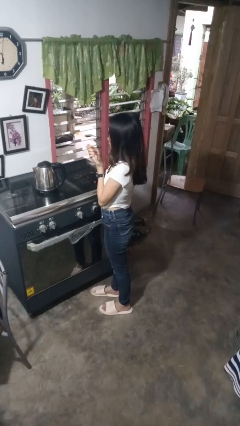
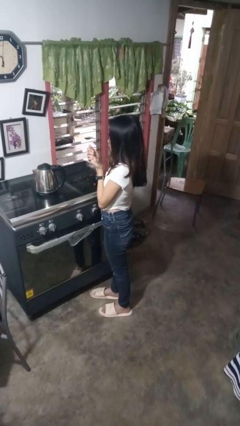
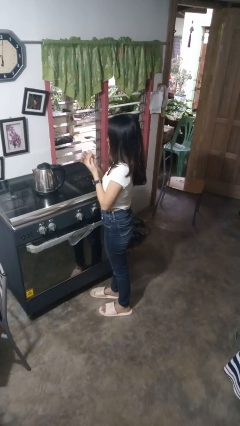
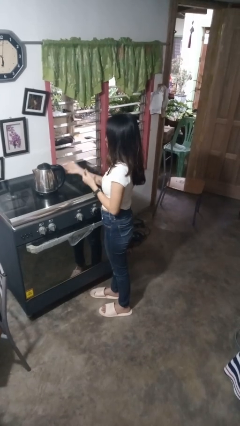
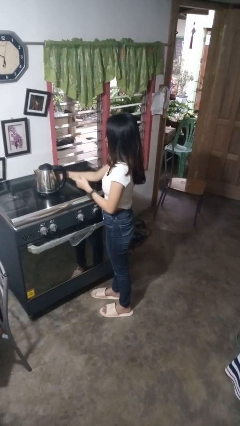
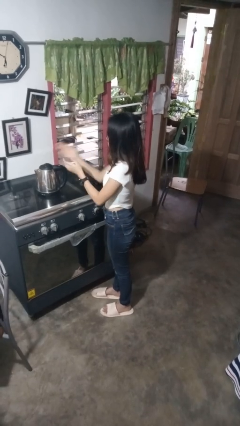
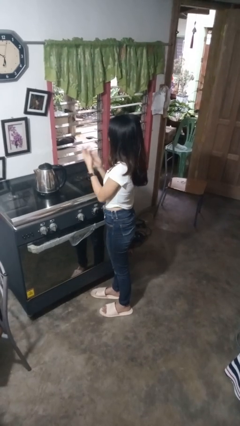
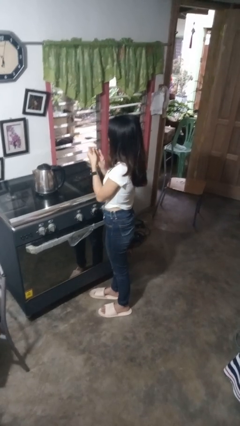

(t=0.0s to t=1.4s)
person burns hand

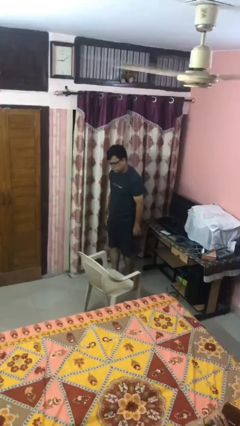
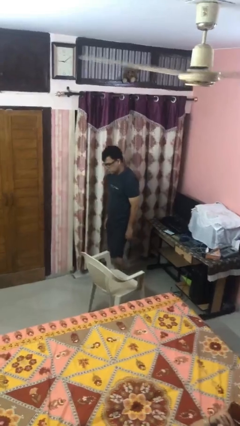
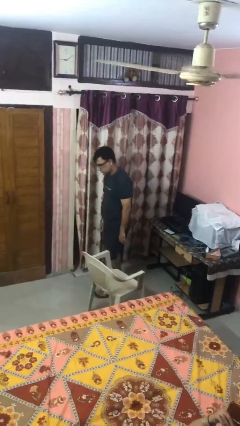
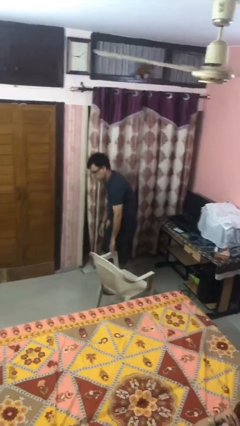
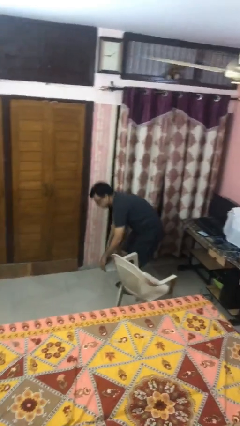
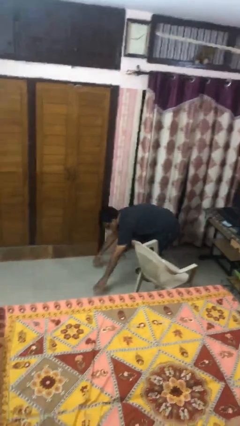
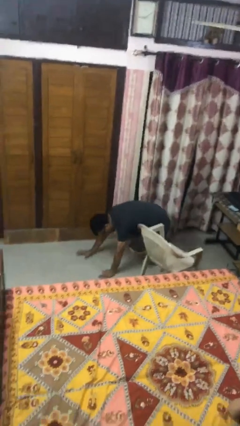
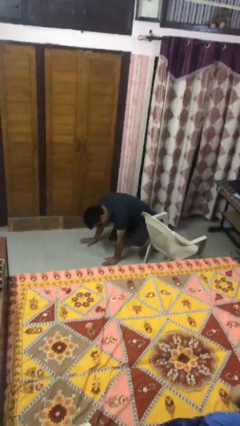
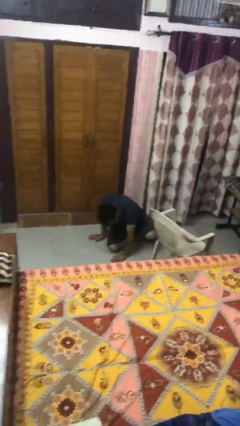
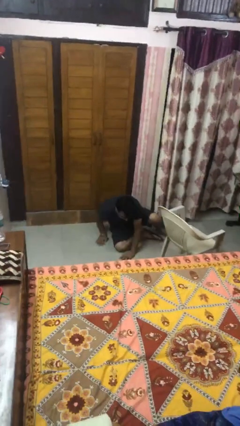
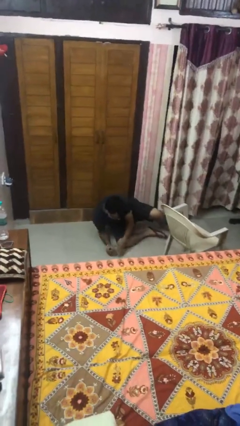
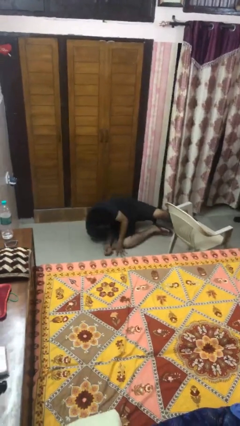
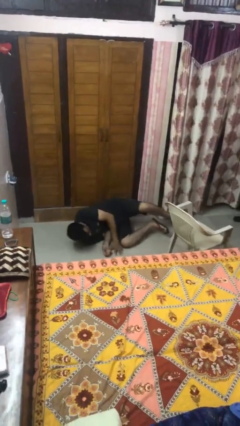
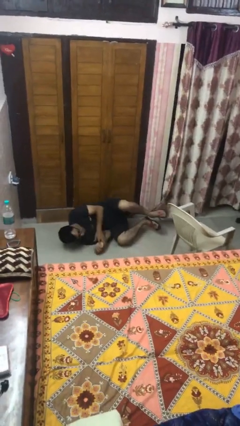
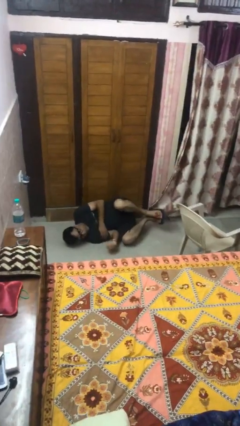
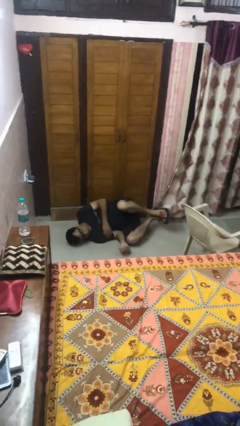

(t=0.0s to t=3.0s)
person trips on object on floor

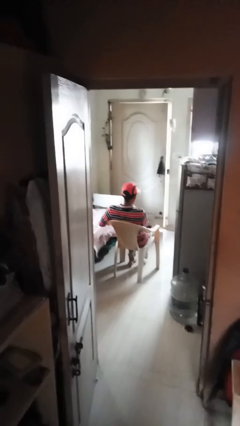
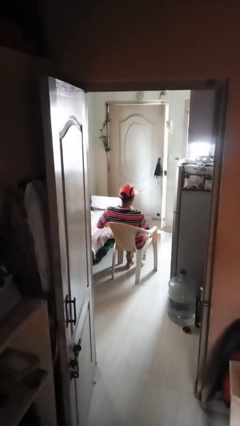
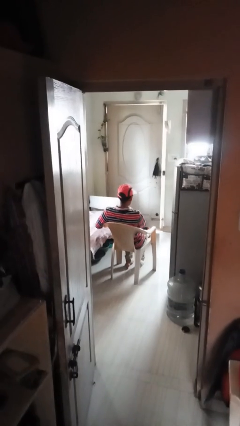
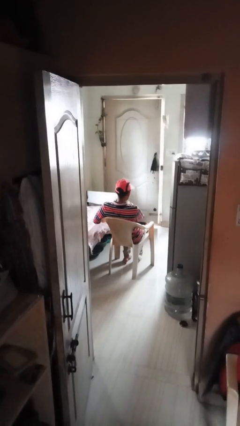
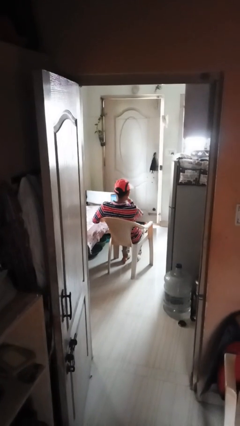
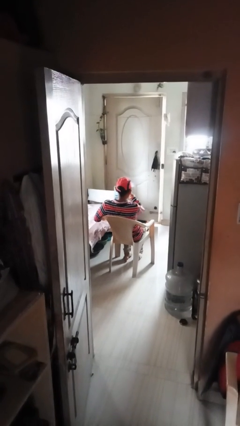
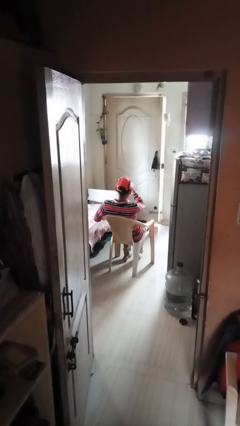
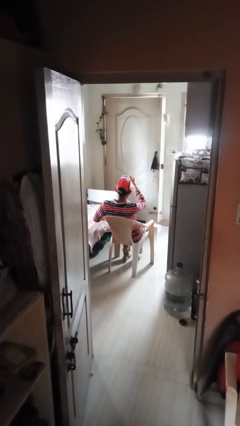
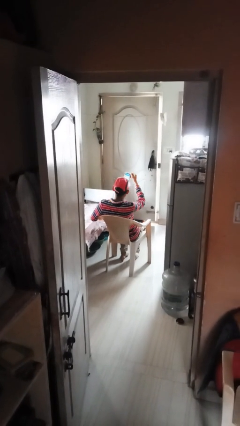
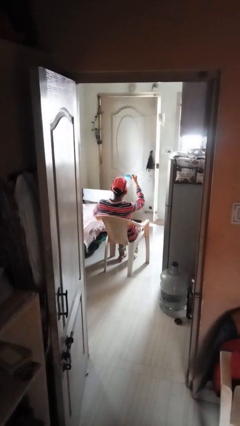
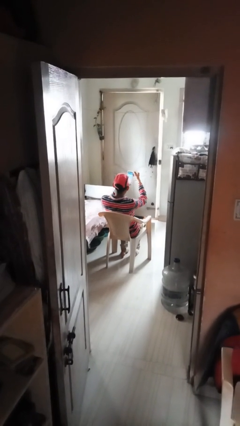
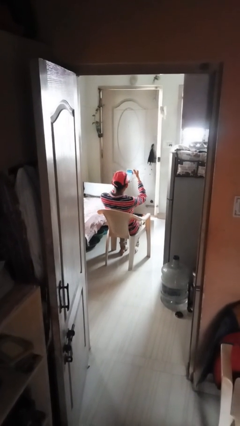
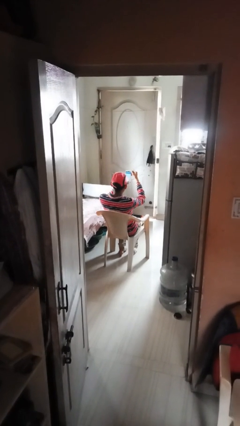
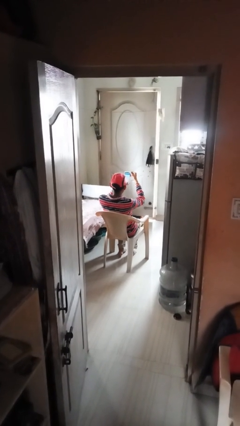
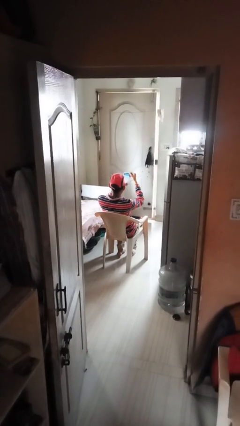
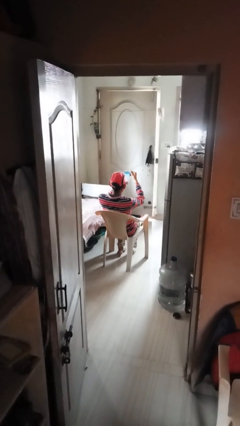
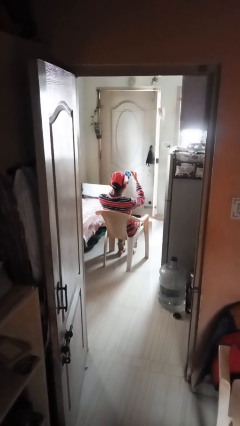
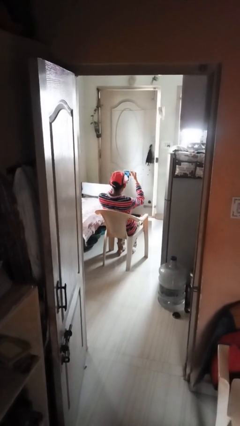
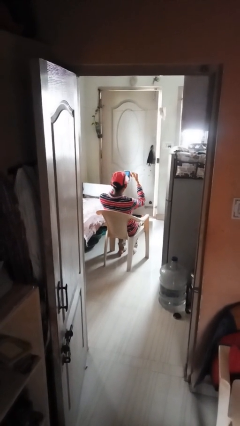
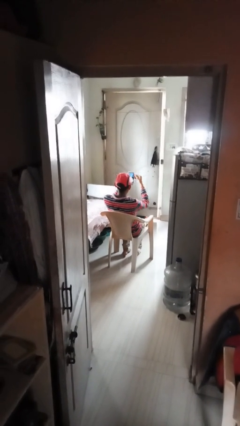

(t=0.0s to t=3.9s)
person takes phone from pocket

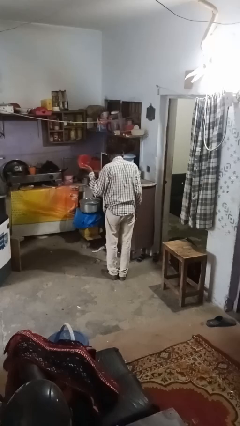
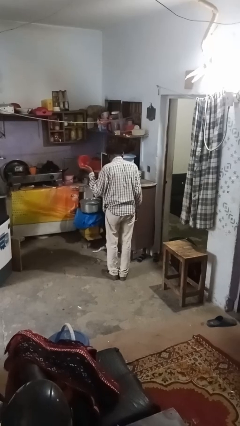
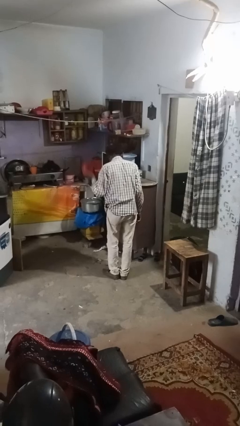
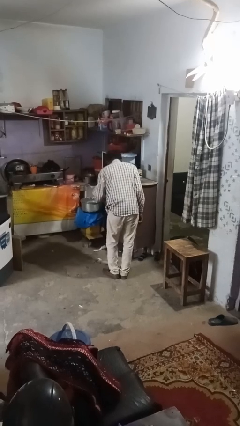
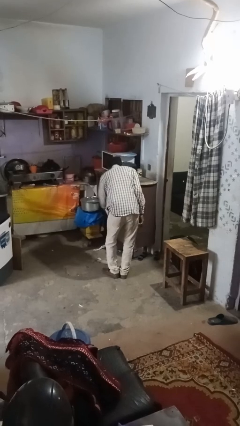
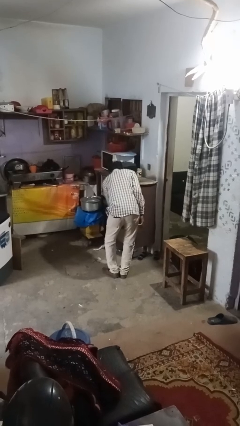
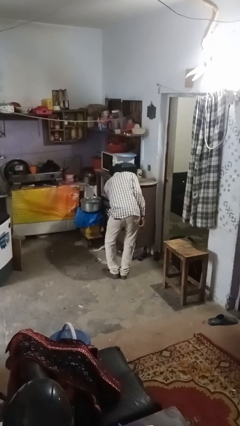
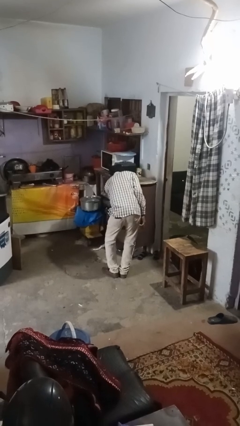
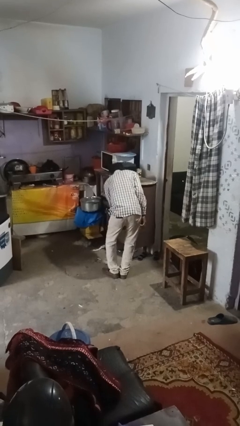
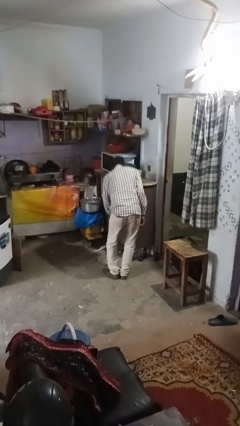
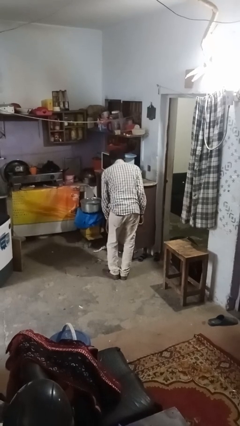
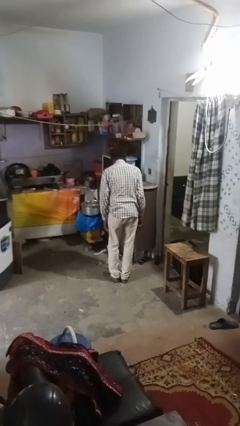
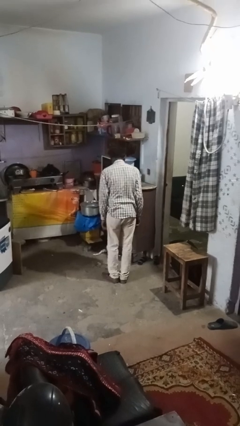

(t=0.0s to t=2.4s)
person puts object into kitchen drawer

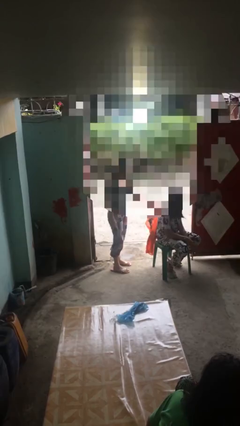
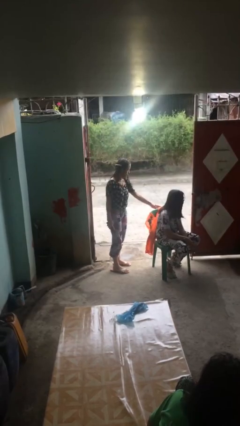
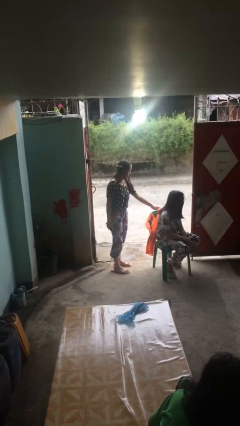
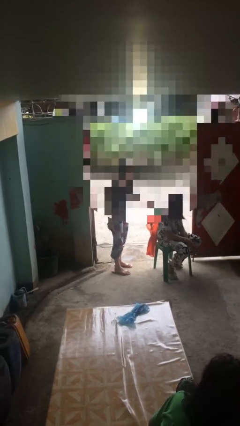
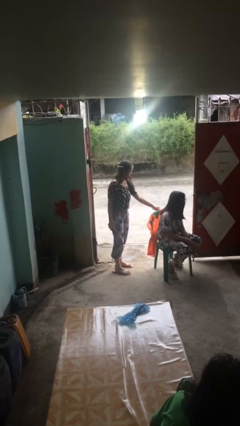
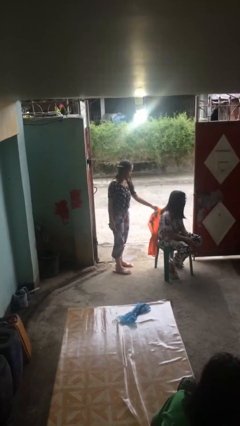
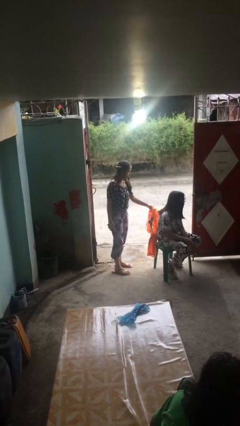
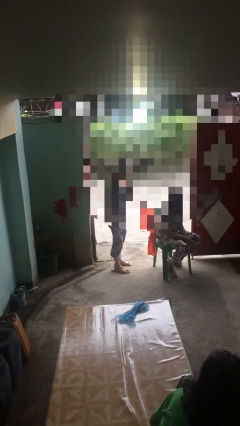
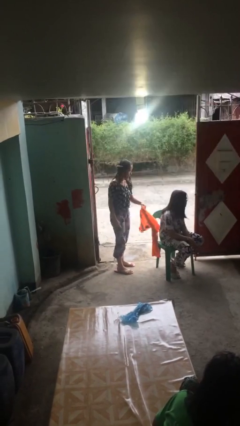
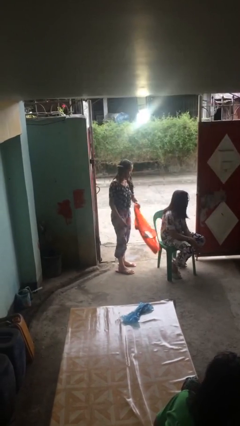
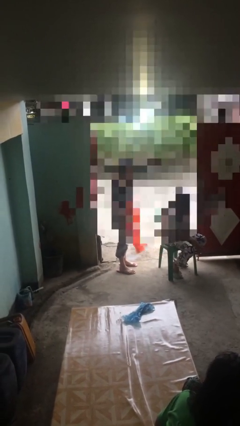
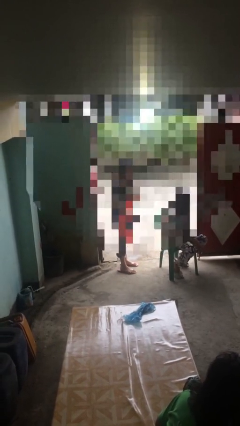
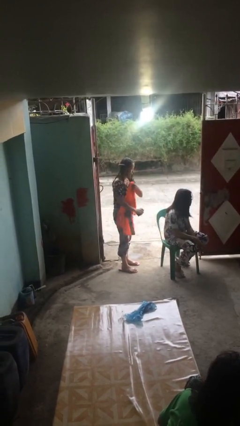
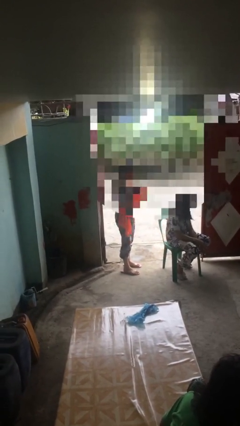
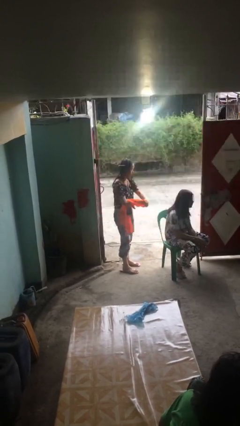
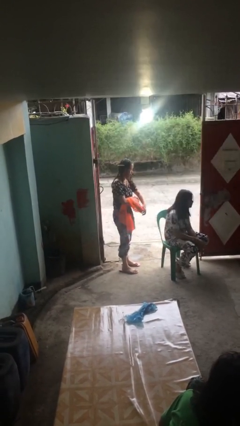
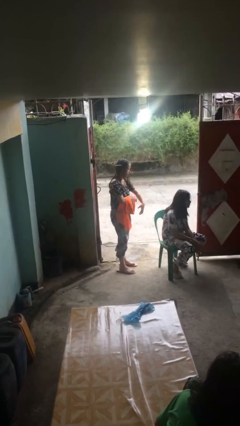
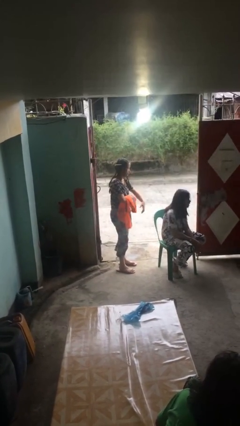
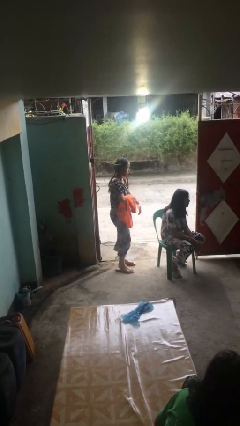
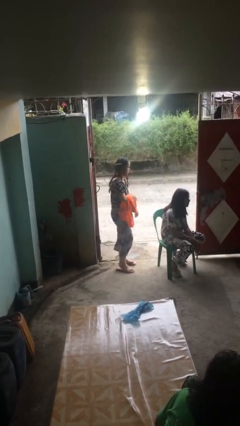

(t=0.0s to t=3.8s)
person steals object from person

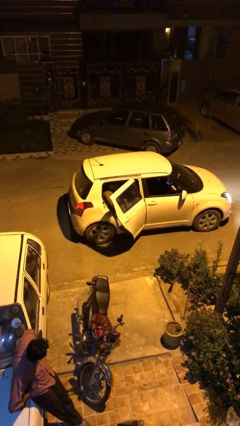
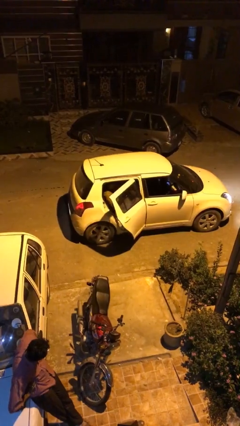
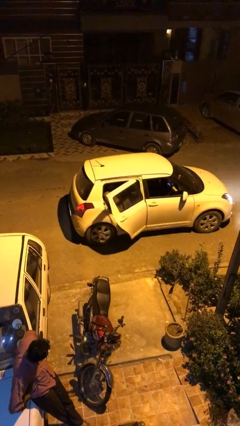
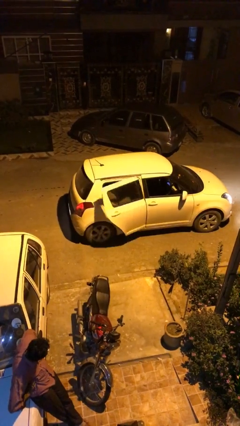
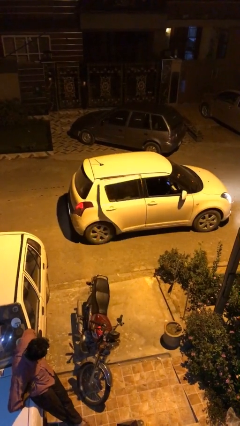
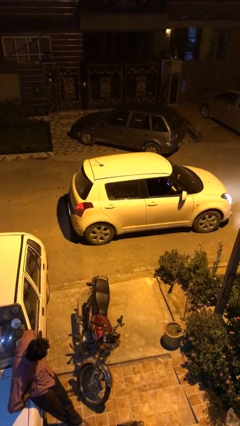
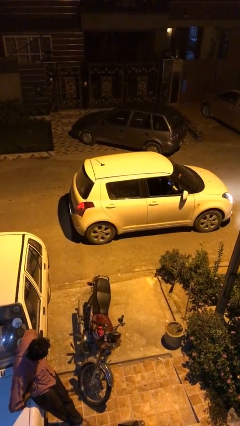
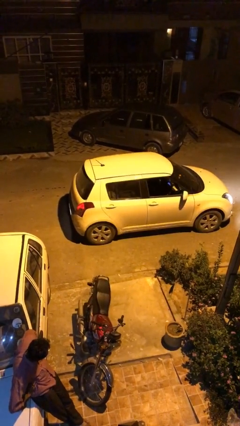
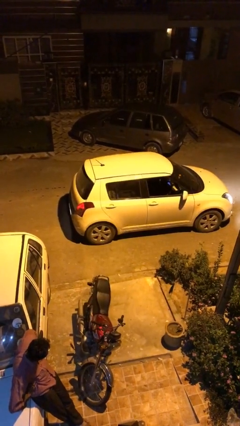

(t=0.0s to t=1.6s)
person closes car door

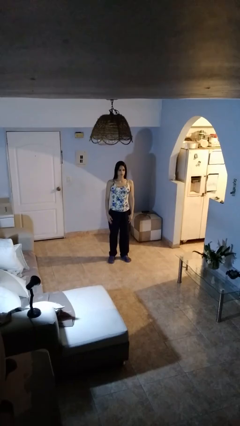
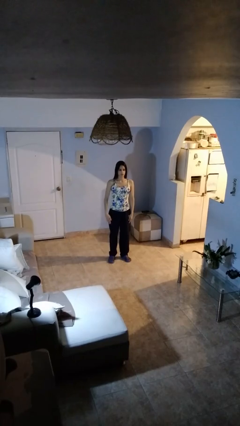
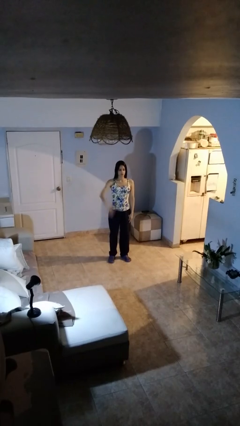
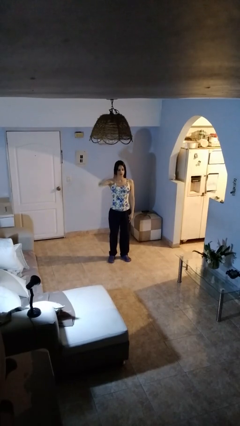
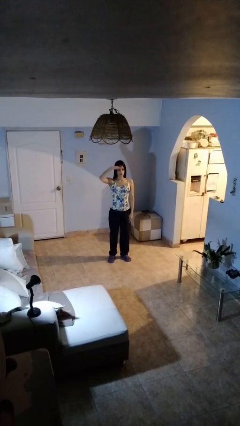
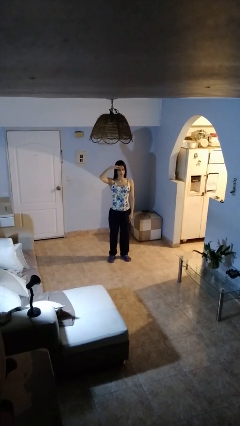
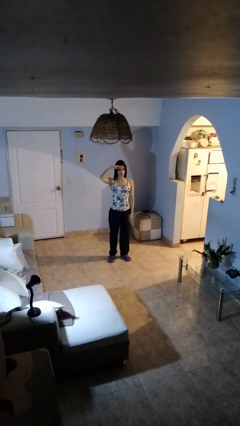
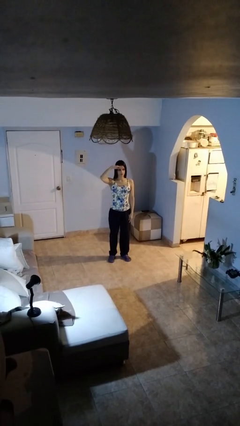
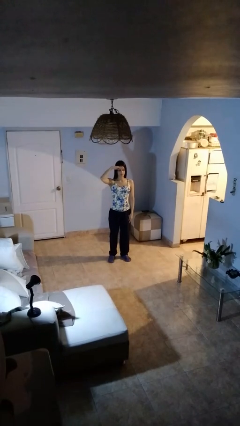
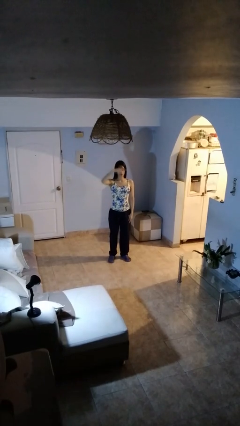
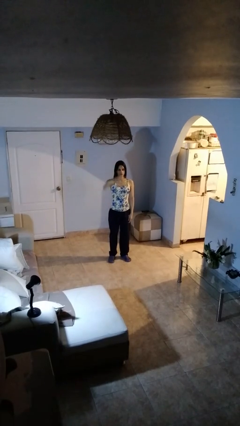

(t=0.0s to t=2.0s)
person salutes
